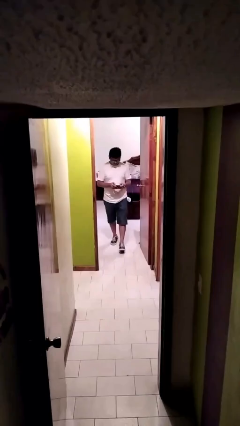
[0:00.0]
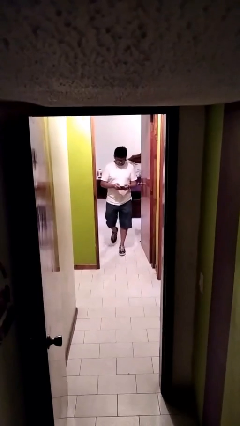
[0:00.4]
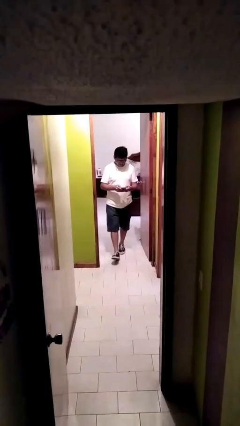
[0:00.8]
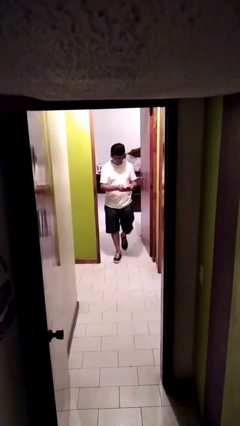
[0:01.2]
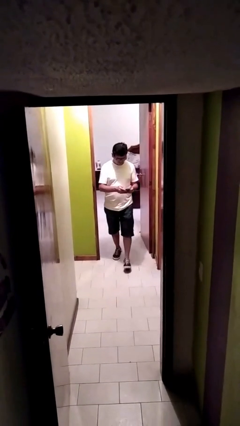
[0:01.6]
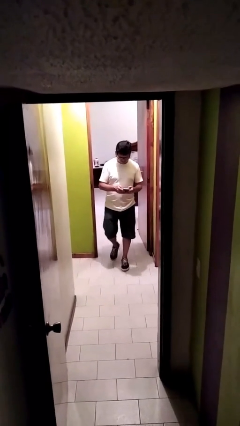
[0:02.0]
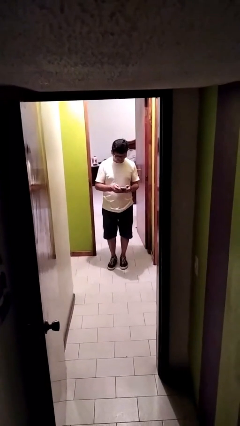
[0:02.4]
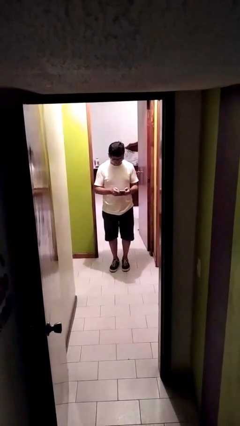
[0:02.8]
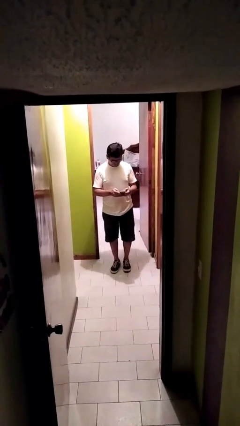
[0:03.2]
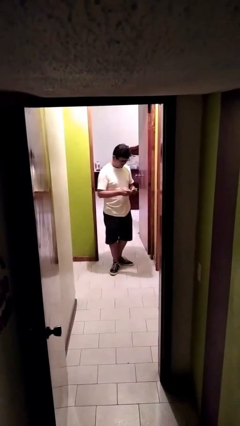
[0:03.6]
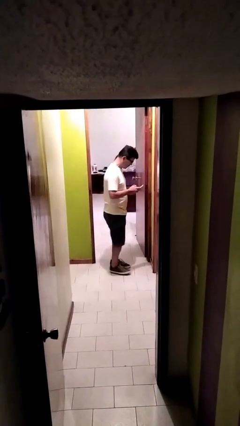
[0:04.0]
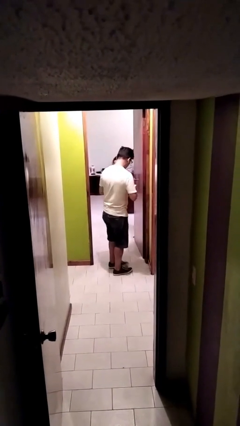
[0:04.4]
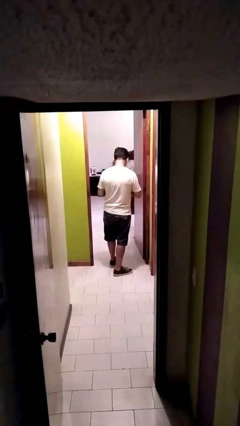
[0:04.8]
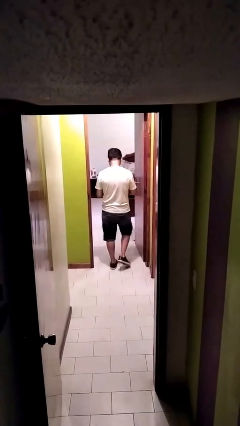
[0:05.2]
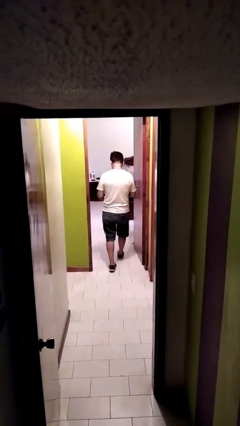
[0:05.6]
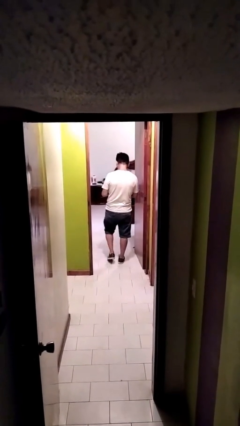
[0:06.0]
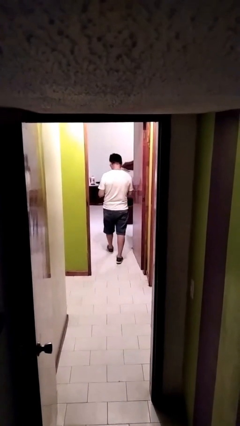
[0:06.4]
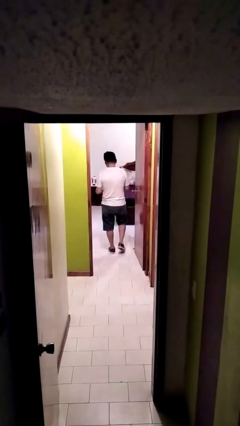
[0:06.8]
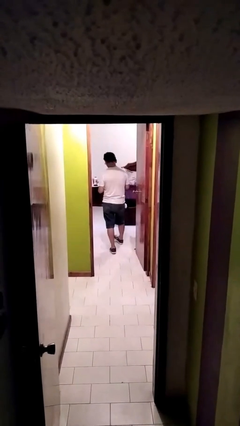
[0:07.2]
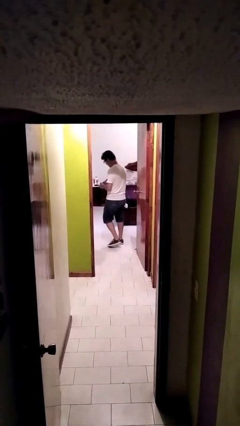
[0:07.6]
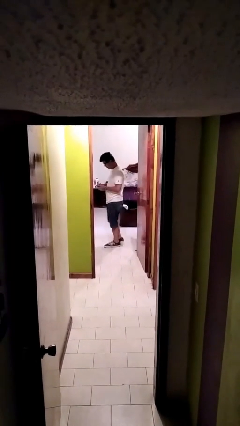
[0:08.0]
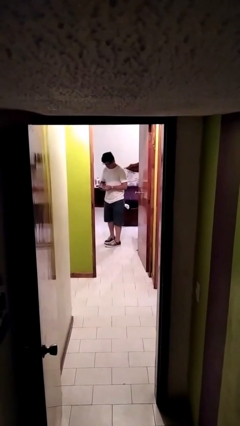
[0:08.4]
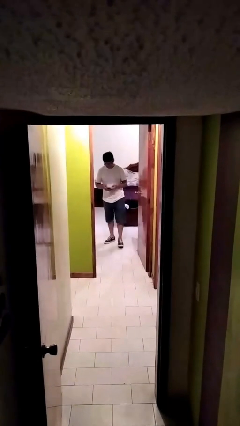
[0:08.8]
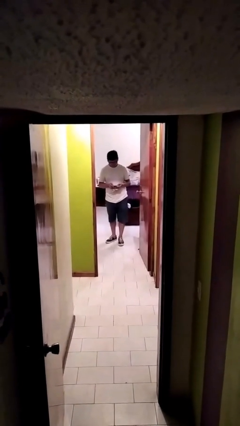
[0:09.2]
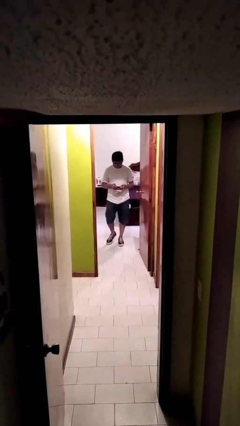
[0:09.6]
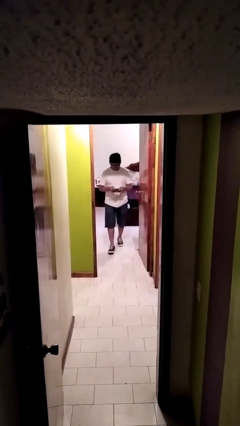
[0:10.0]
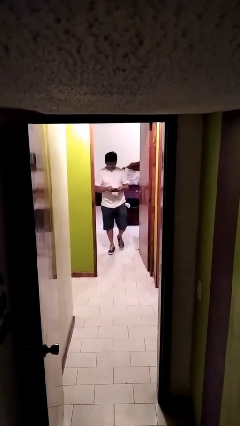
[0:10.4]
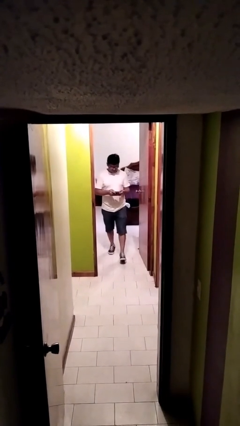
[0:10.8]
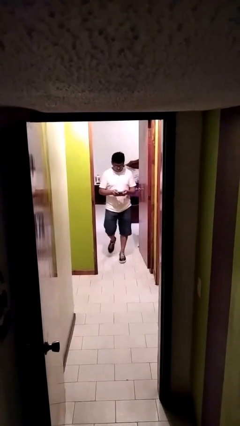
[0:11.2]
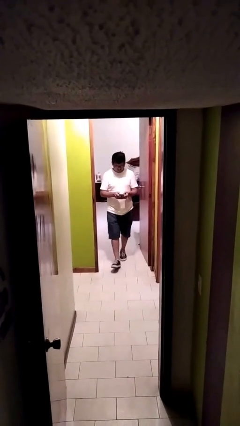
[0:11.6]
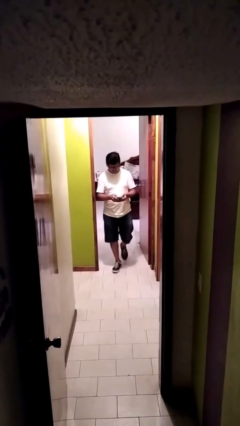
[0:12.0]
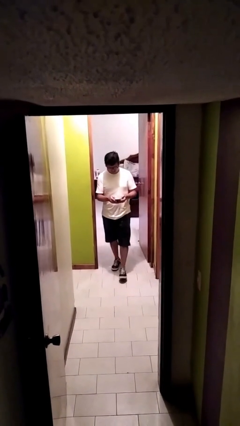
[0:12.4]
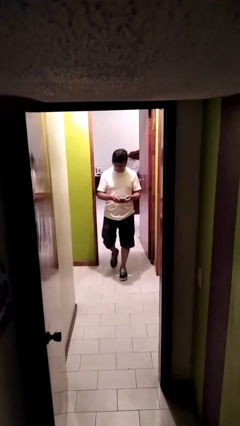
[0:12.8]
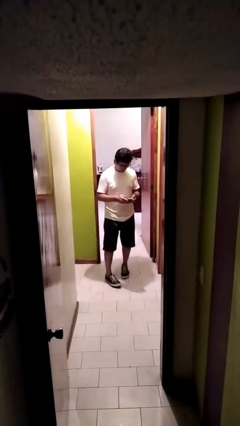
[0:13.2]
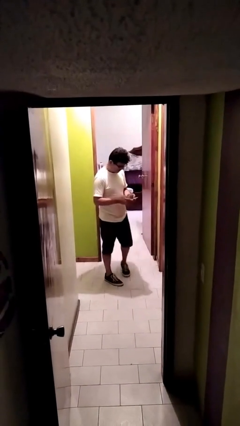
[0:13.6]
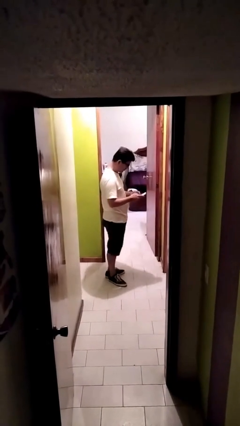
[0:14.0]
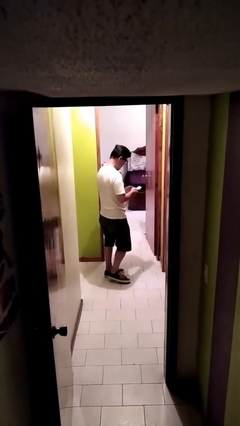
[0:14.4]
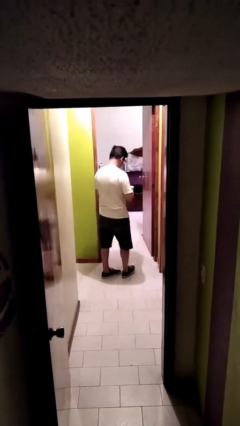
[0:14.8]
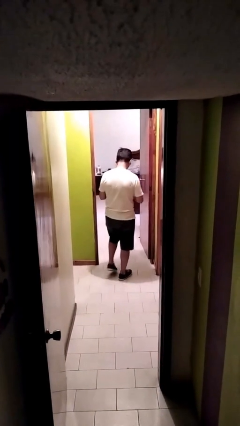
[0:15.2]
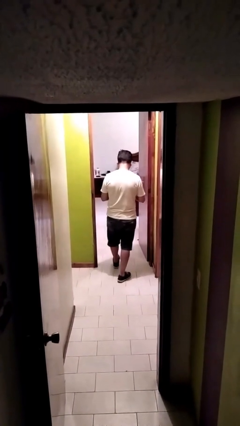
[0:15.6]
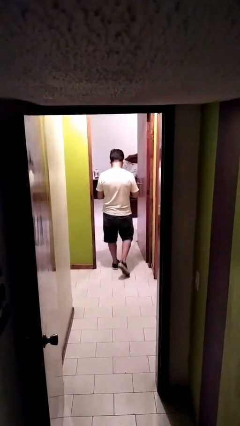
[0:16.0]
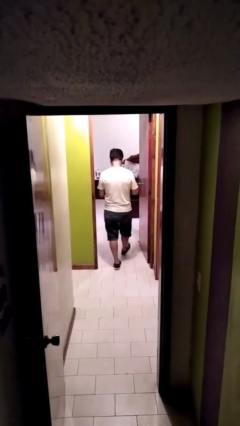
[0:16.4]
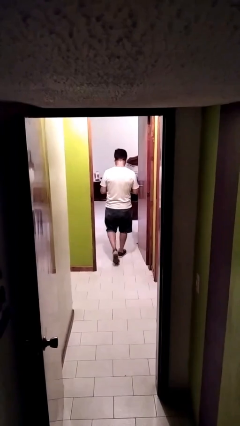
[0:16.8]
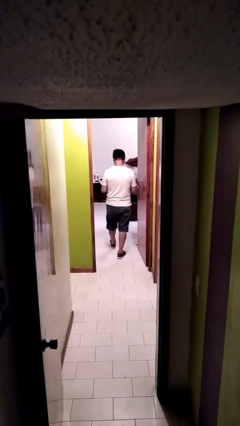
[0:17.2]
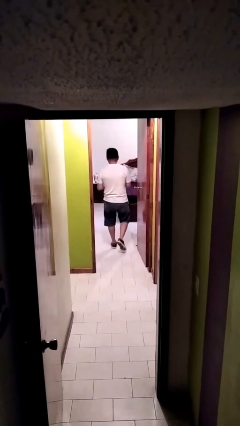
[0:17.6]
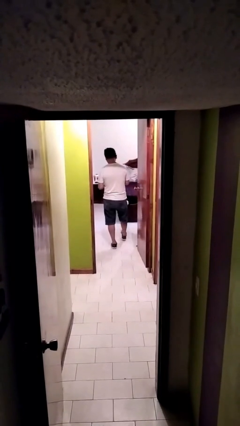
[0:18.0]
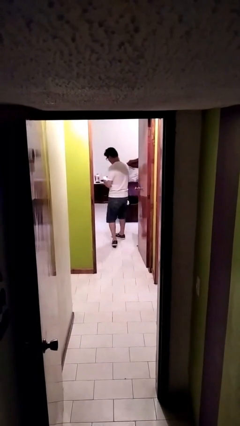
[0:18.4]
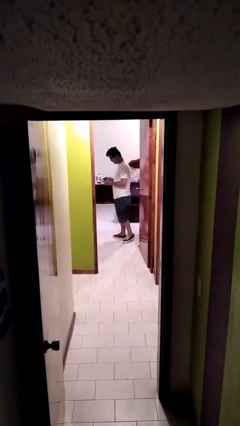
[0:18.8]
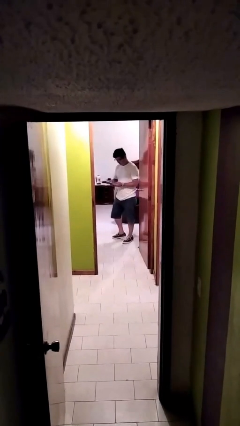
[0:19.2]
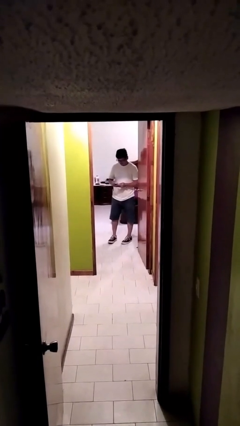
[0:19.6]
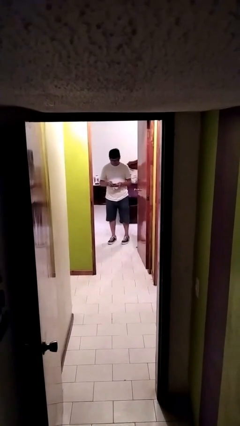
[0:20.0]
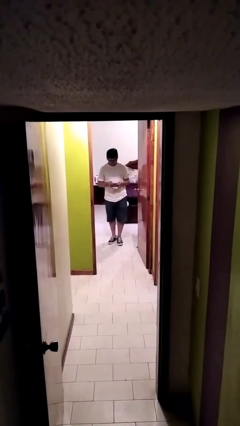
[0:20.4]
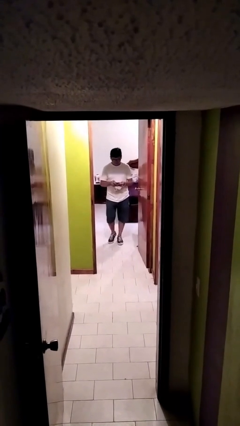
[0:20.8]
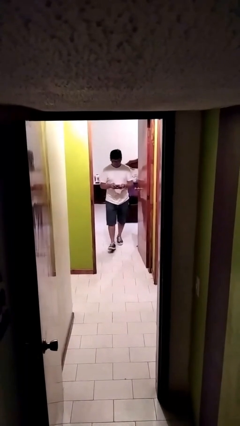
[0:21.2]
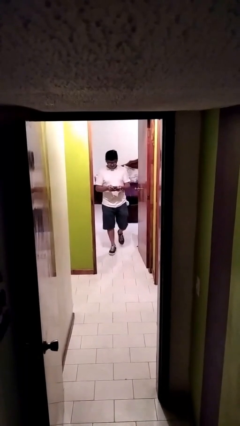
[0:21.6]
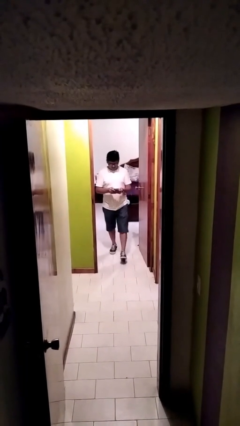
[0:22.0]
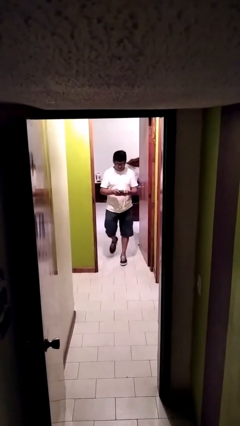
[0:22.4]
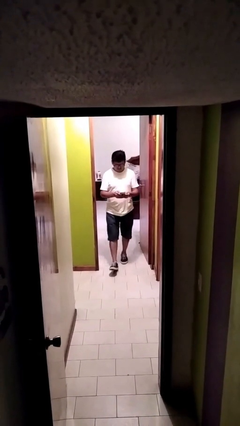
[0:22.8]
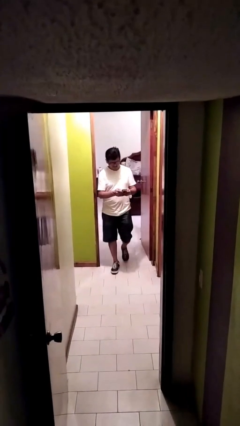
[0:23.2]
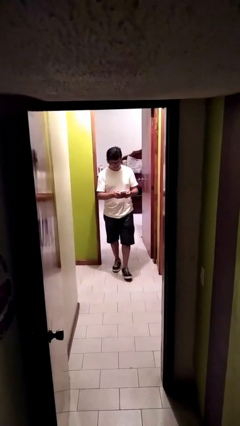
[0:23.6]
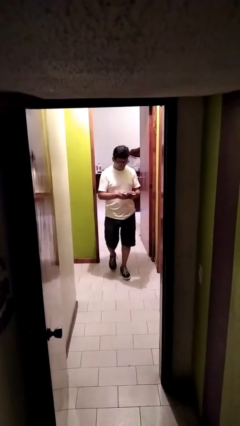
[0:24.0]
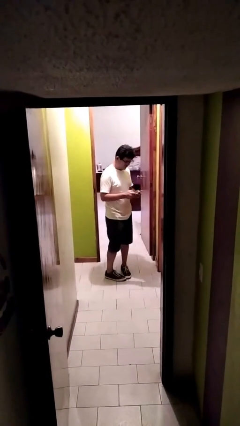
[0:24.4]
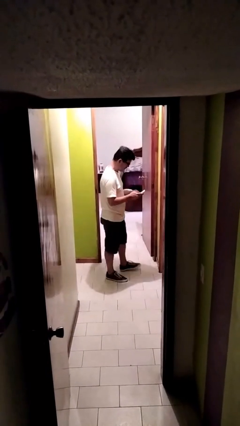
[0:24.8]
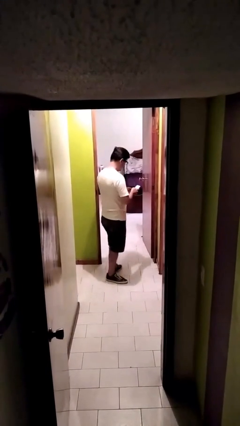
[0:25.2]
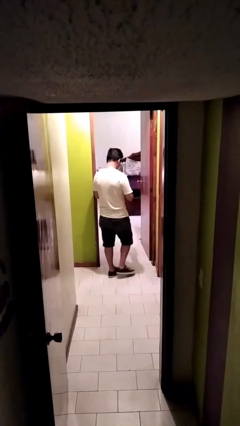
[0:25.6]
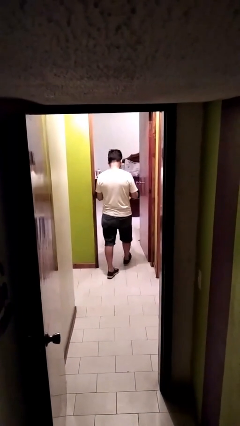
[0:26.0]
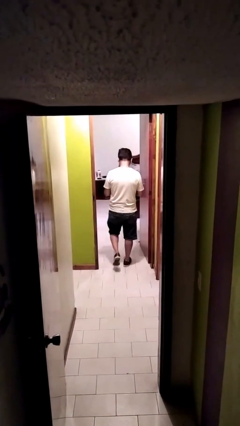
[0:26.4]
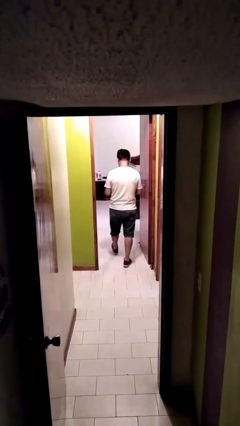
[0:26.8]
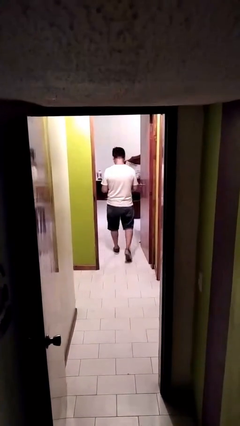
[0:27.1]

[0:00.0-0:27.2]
person texts on phone

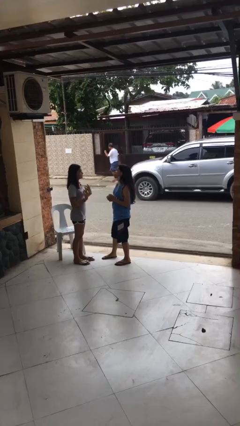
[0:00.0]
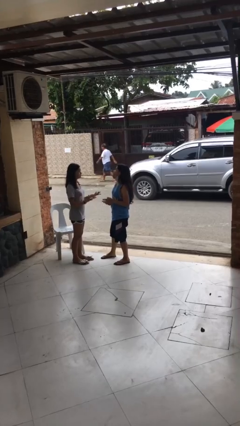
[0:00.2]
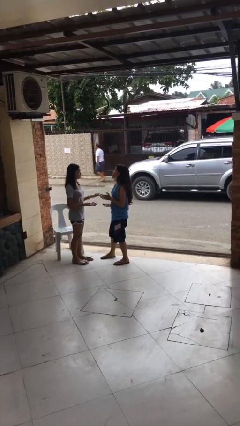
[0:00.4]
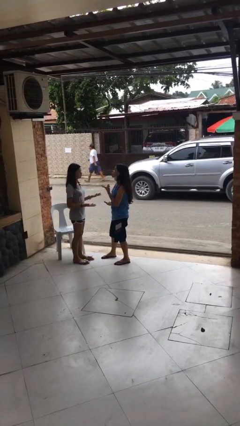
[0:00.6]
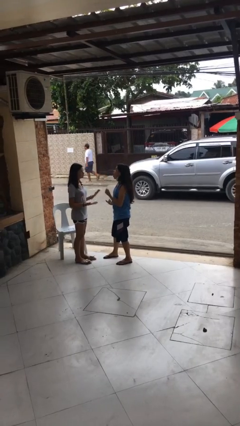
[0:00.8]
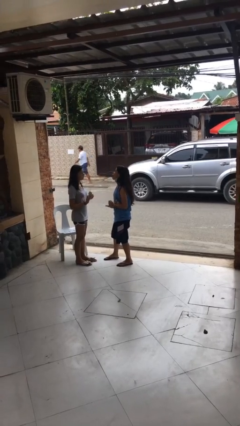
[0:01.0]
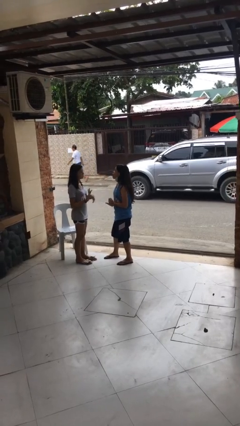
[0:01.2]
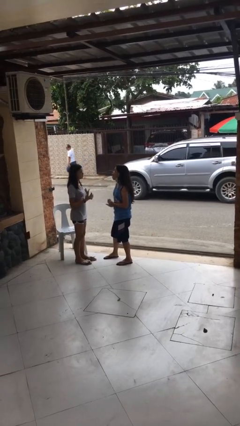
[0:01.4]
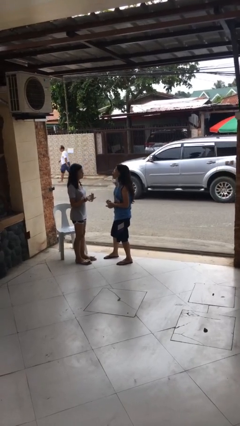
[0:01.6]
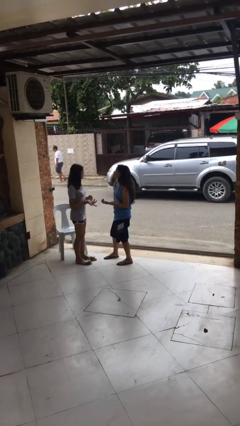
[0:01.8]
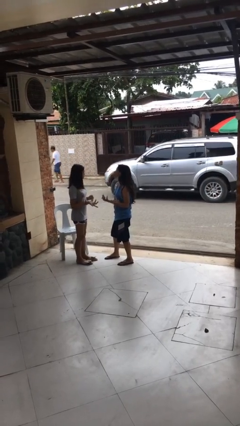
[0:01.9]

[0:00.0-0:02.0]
person talks to person

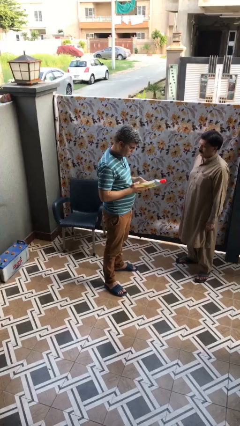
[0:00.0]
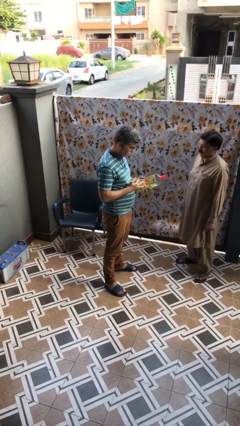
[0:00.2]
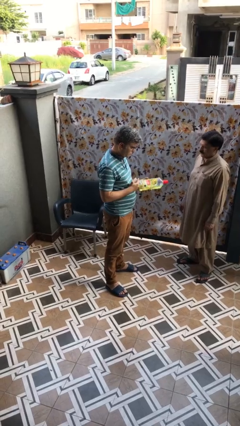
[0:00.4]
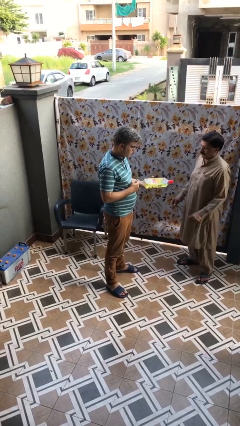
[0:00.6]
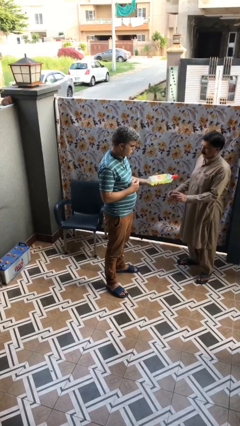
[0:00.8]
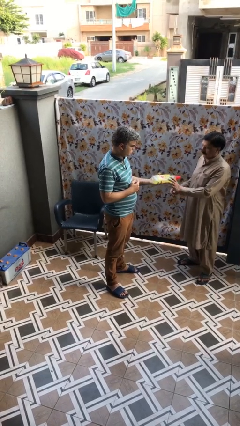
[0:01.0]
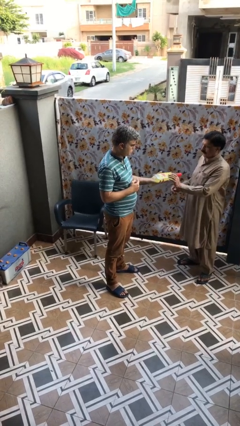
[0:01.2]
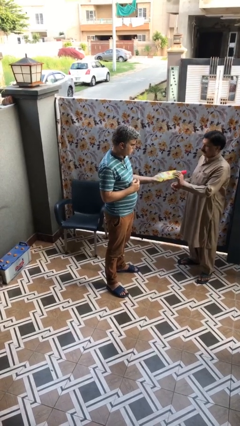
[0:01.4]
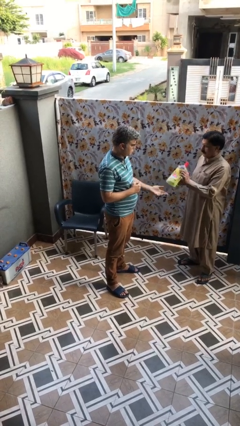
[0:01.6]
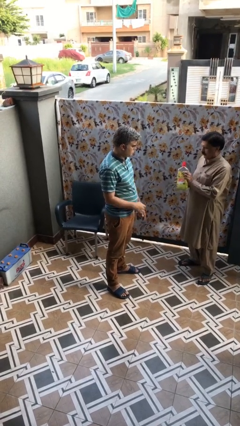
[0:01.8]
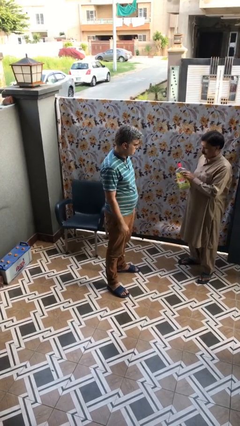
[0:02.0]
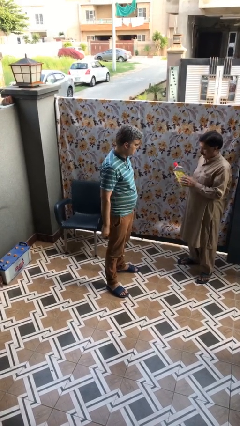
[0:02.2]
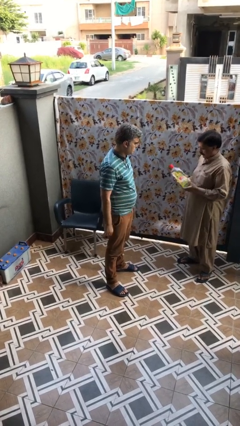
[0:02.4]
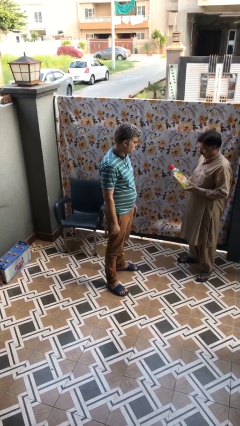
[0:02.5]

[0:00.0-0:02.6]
person transfers object to person
